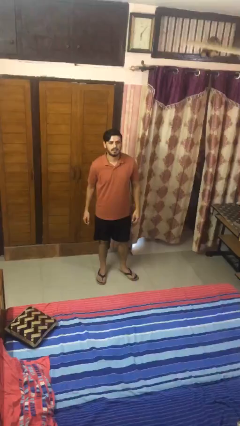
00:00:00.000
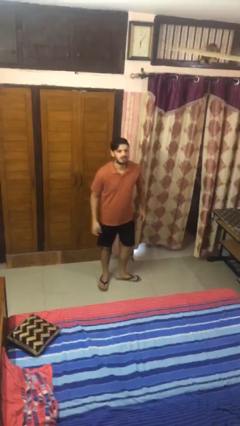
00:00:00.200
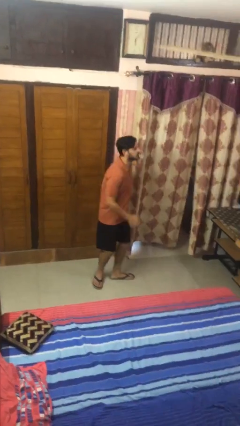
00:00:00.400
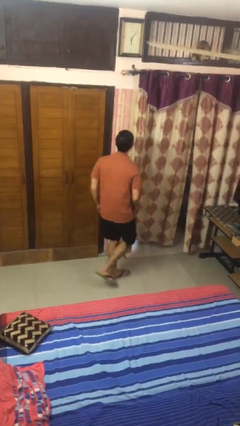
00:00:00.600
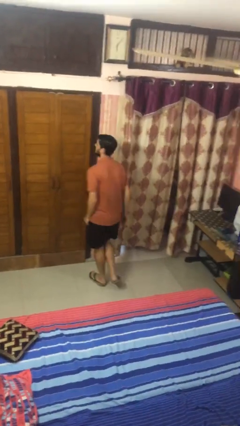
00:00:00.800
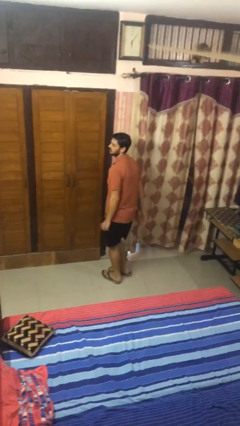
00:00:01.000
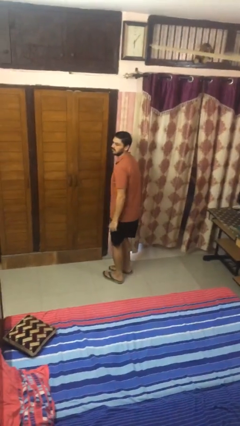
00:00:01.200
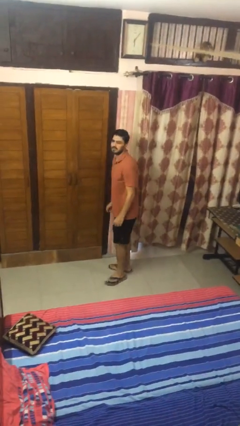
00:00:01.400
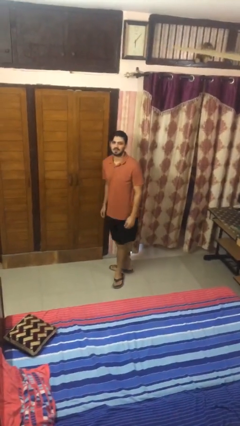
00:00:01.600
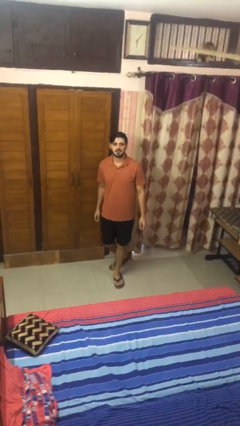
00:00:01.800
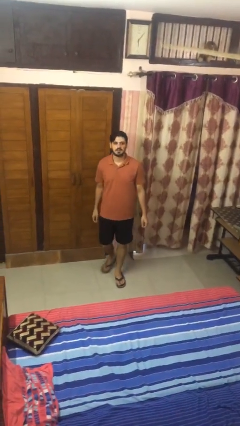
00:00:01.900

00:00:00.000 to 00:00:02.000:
person twirls

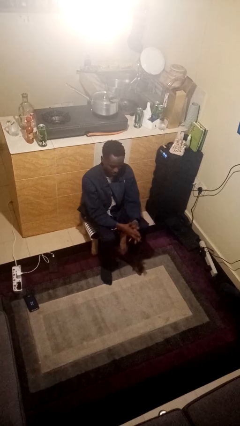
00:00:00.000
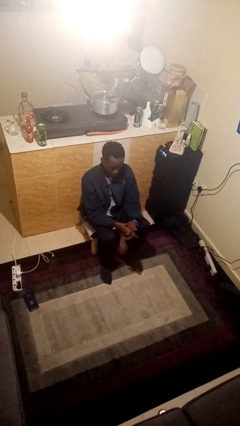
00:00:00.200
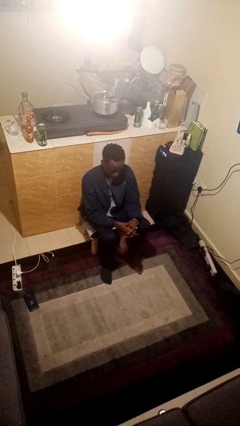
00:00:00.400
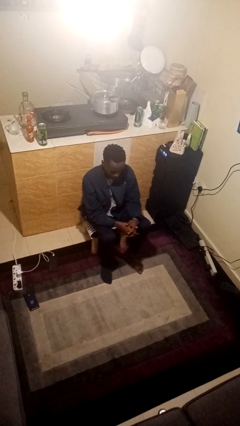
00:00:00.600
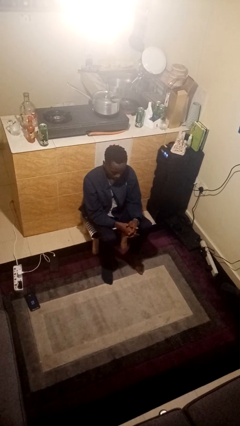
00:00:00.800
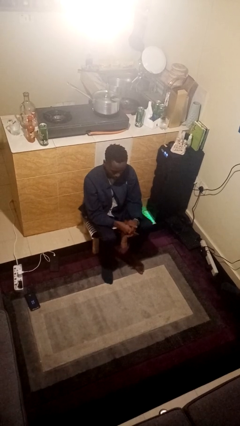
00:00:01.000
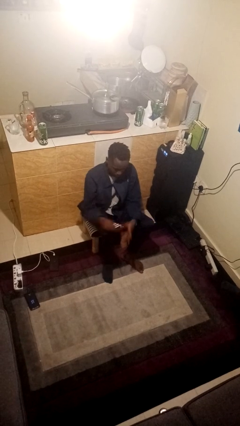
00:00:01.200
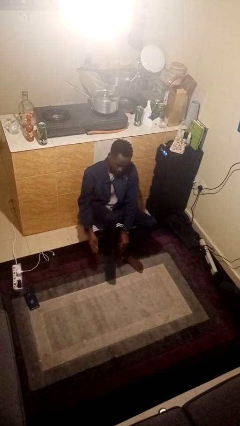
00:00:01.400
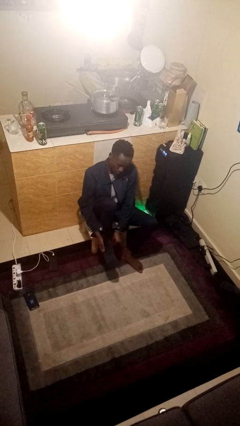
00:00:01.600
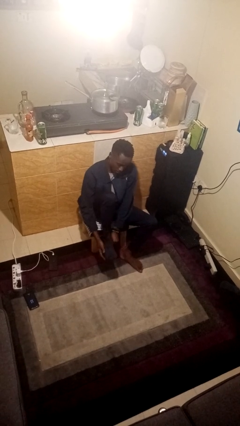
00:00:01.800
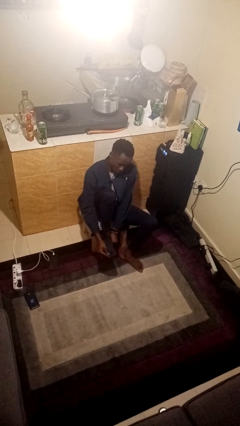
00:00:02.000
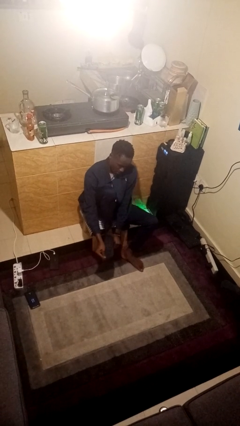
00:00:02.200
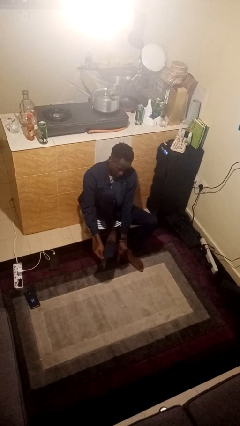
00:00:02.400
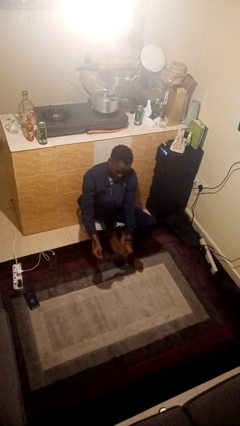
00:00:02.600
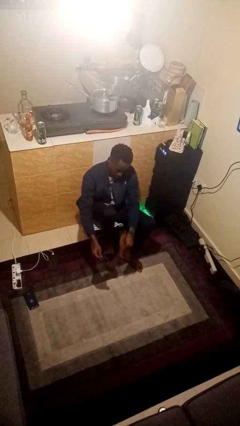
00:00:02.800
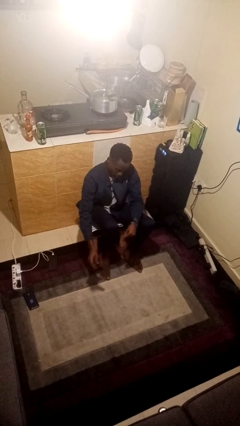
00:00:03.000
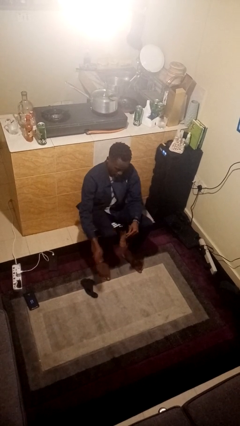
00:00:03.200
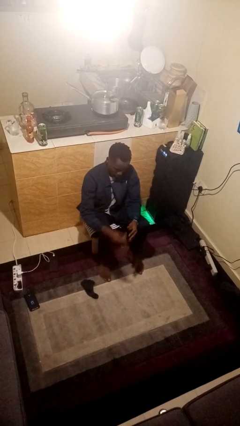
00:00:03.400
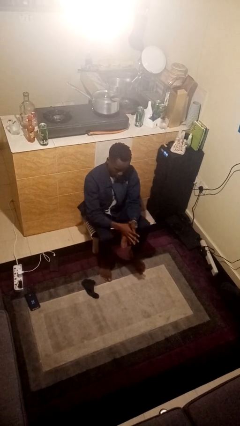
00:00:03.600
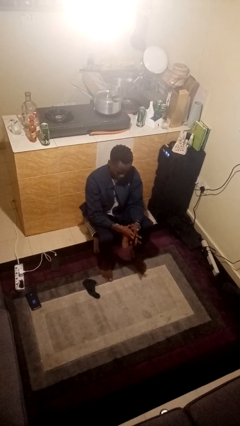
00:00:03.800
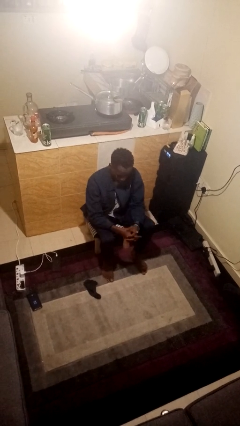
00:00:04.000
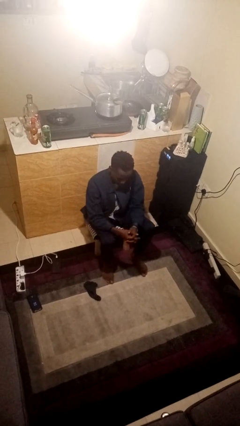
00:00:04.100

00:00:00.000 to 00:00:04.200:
person takes off socks

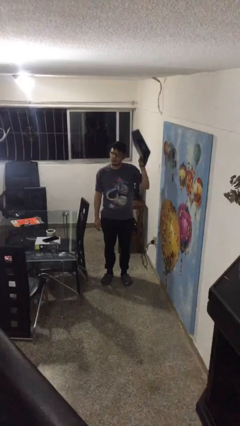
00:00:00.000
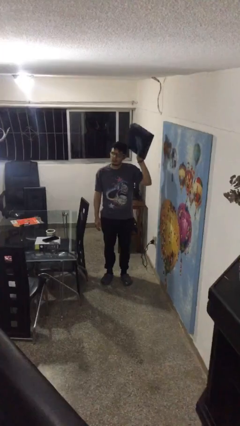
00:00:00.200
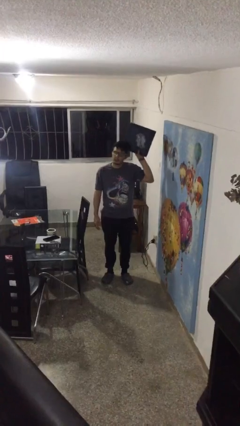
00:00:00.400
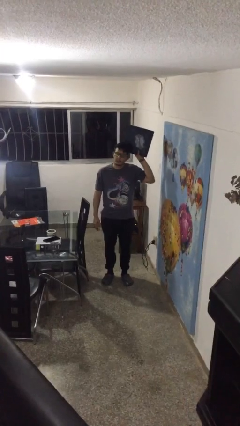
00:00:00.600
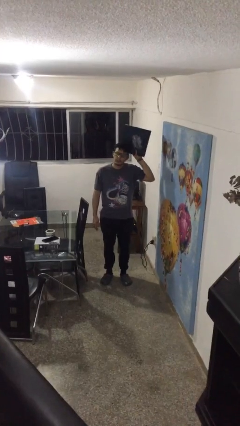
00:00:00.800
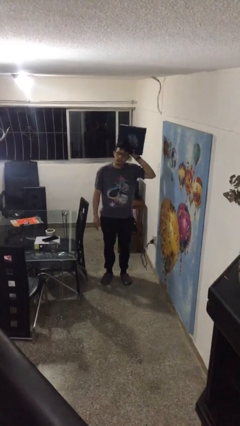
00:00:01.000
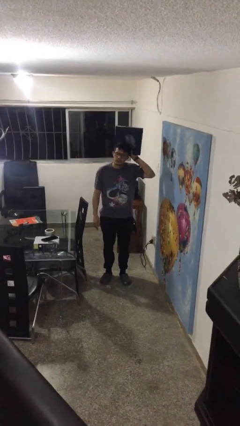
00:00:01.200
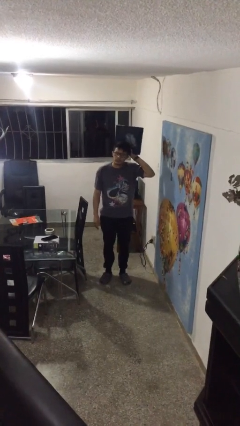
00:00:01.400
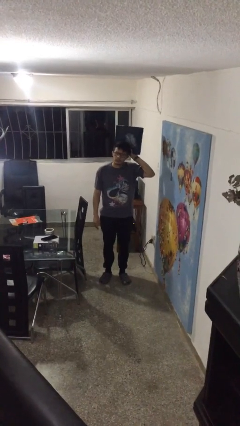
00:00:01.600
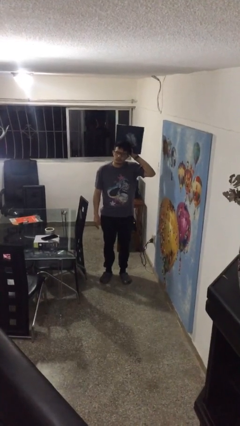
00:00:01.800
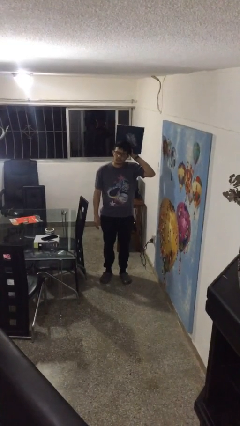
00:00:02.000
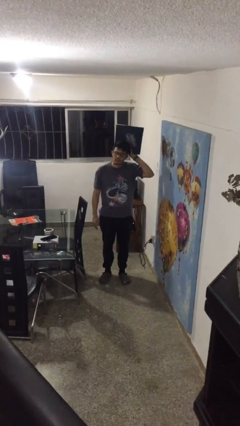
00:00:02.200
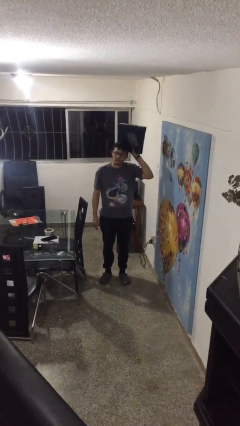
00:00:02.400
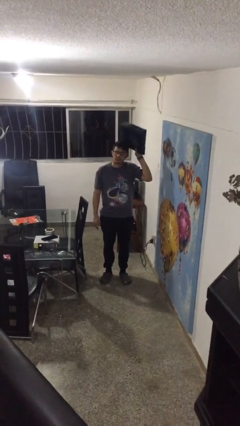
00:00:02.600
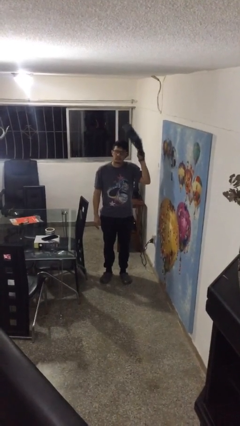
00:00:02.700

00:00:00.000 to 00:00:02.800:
person holds object above head

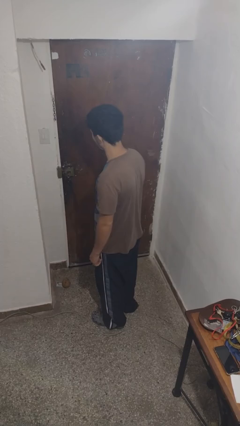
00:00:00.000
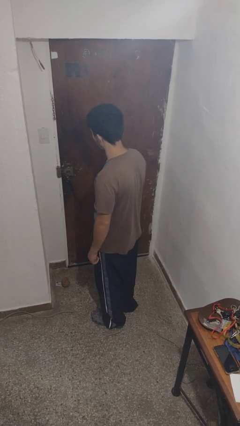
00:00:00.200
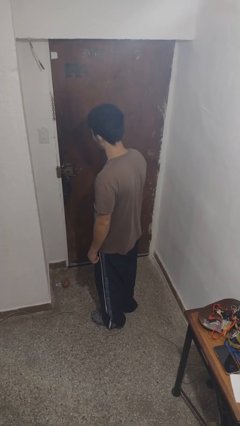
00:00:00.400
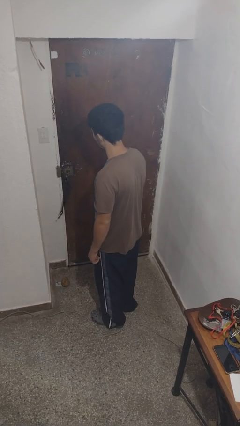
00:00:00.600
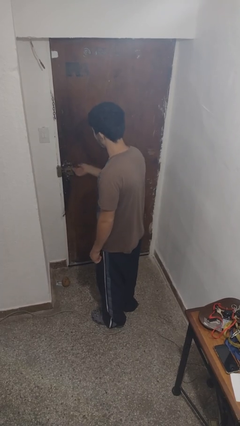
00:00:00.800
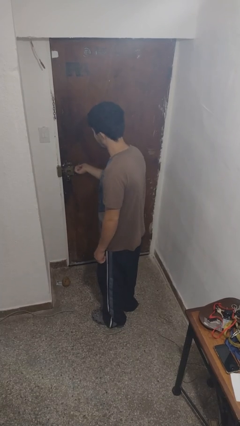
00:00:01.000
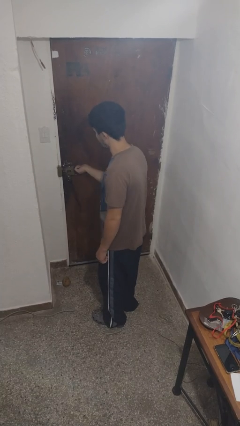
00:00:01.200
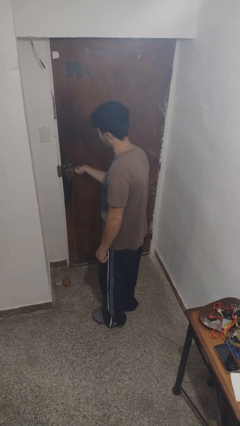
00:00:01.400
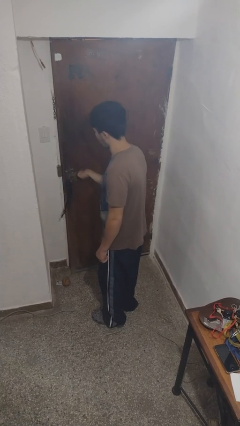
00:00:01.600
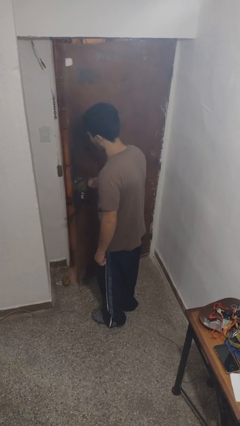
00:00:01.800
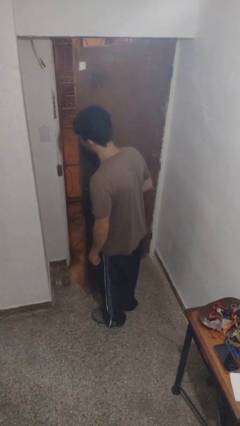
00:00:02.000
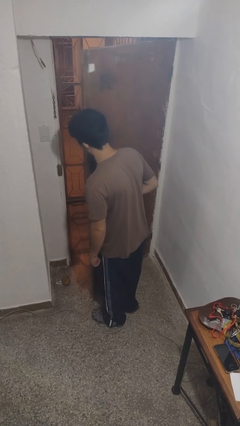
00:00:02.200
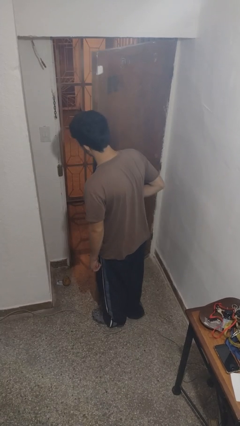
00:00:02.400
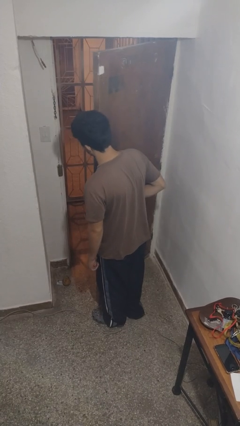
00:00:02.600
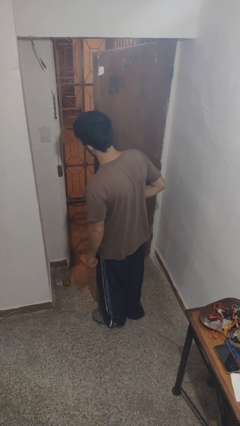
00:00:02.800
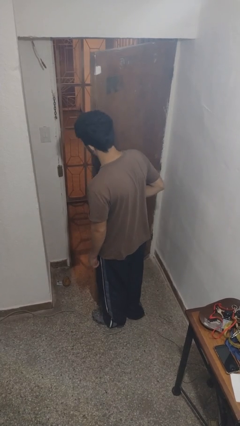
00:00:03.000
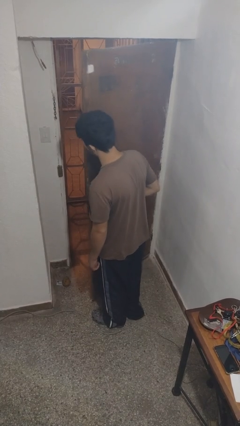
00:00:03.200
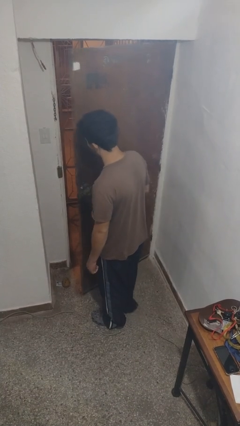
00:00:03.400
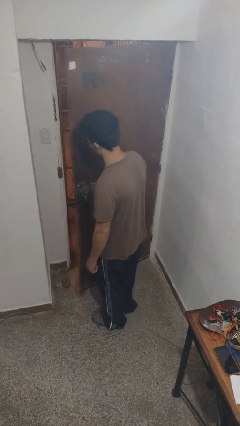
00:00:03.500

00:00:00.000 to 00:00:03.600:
person opens facility door

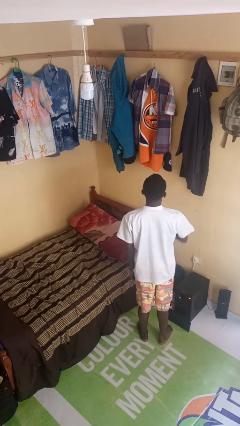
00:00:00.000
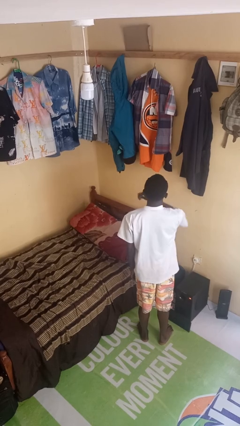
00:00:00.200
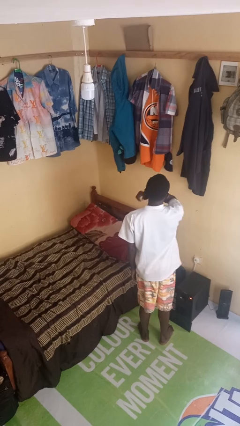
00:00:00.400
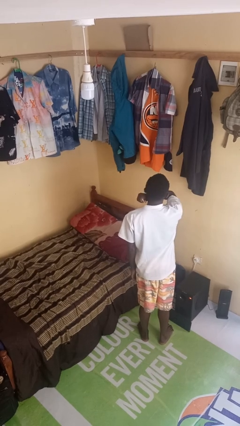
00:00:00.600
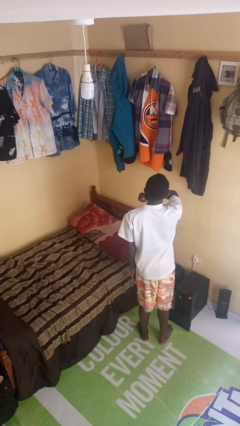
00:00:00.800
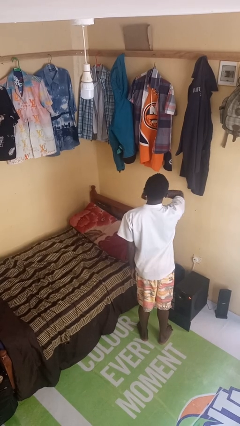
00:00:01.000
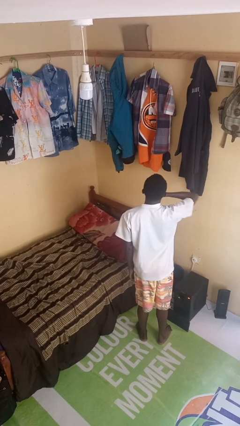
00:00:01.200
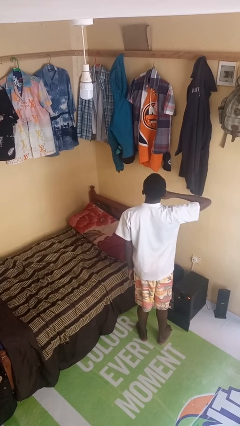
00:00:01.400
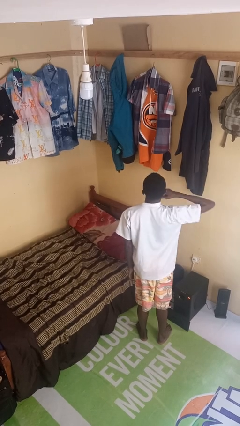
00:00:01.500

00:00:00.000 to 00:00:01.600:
person gestures cut

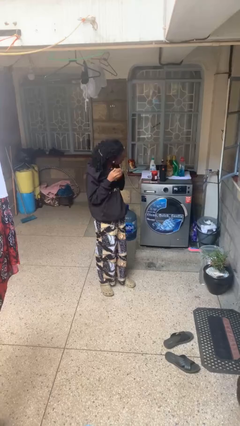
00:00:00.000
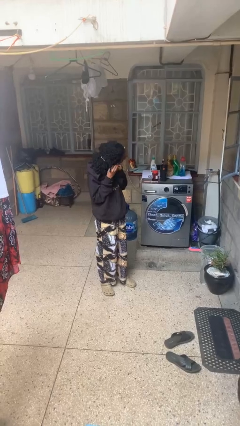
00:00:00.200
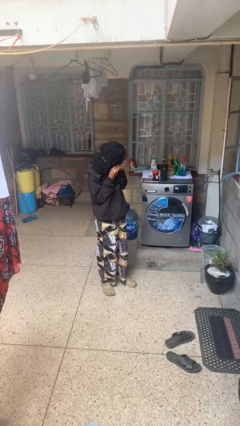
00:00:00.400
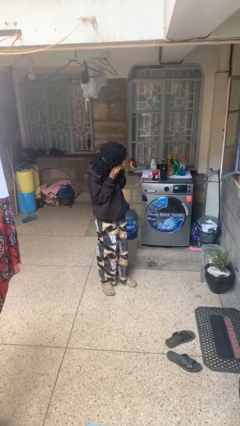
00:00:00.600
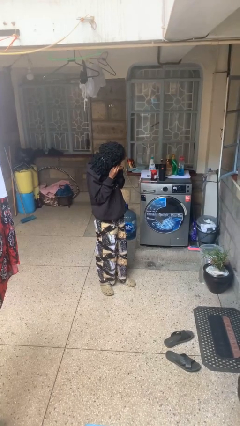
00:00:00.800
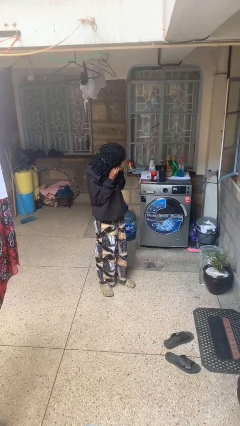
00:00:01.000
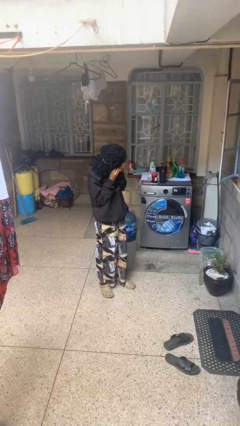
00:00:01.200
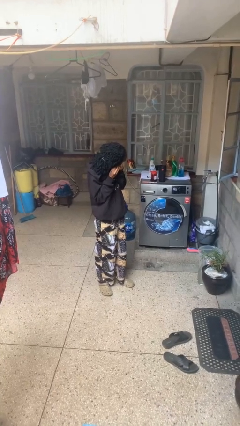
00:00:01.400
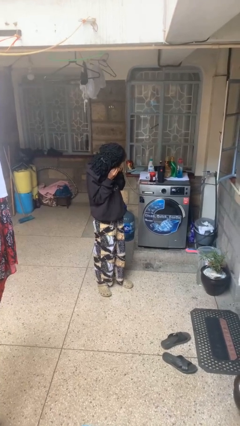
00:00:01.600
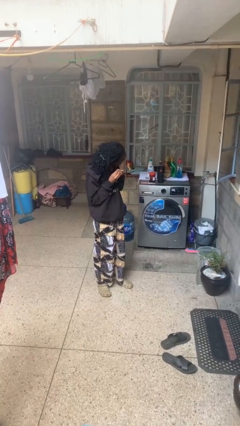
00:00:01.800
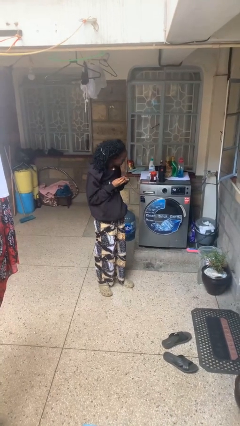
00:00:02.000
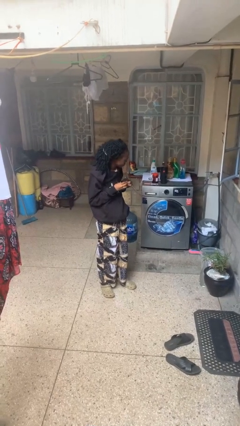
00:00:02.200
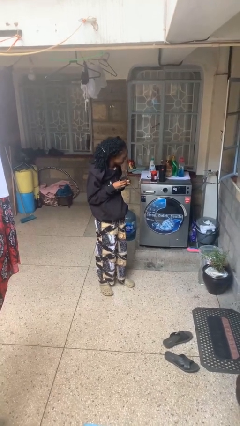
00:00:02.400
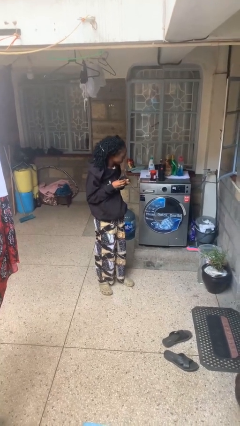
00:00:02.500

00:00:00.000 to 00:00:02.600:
person takes off earrings

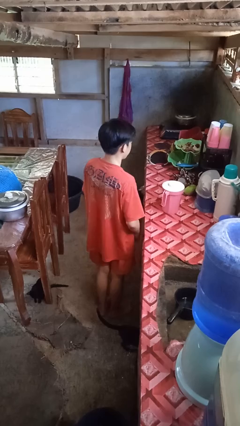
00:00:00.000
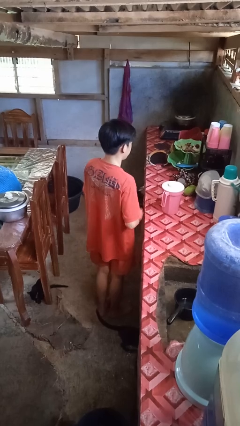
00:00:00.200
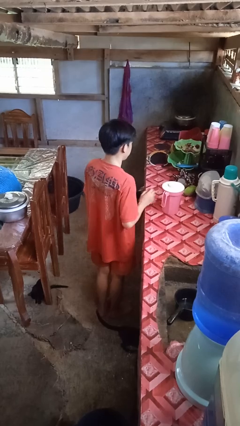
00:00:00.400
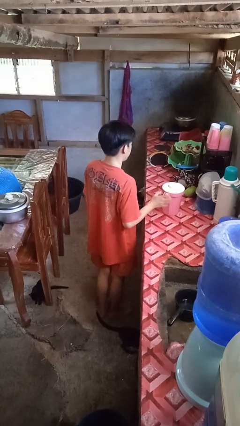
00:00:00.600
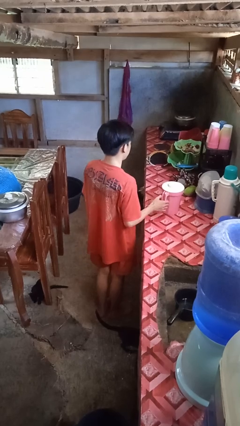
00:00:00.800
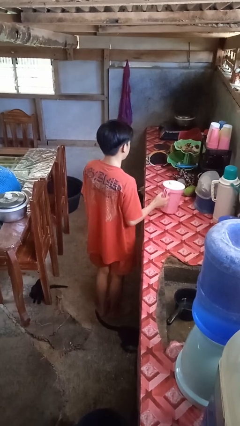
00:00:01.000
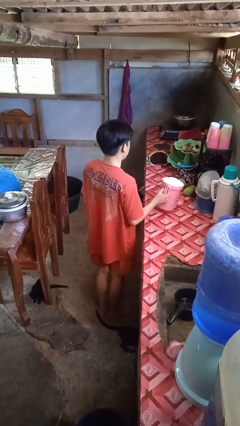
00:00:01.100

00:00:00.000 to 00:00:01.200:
person picks up object from countertop
